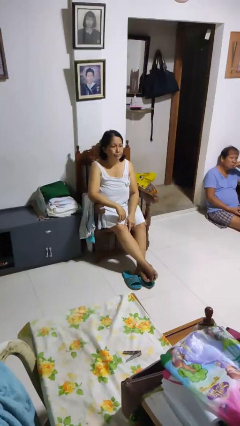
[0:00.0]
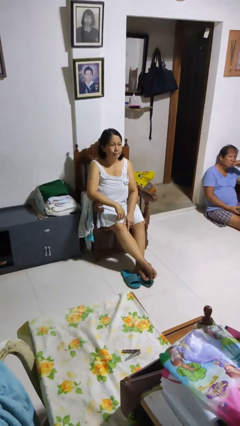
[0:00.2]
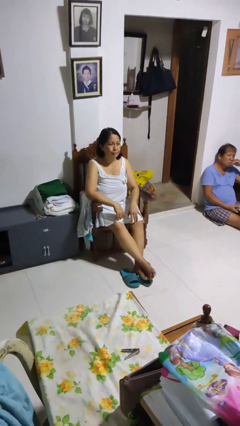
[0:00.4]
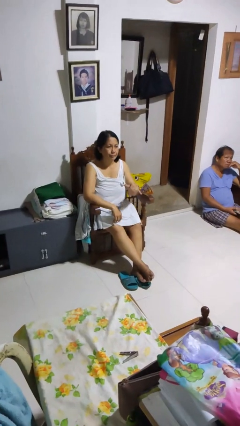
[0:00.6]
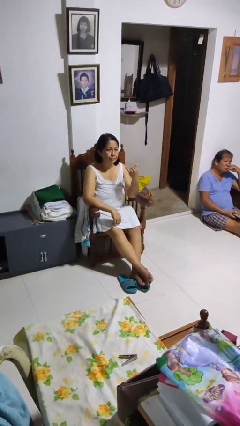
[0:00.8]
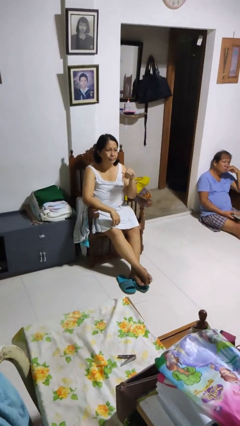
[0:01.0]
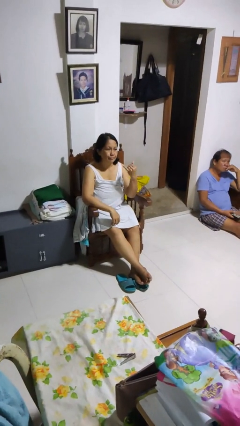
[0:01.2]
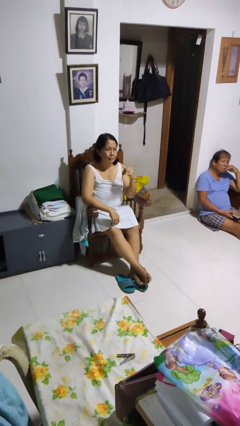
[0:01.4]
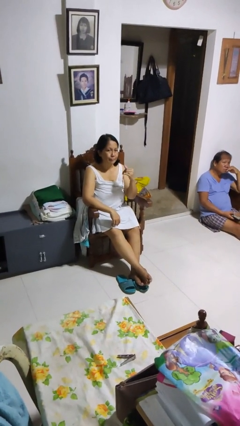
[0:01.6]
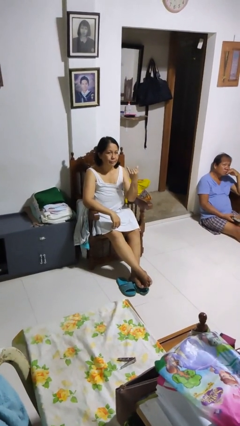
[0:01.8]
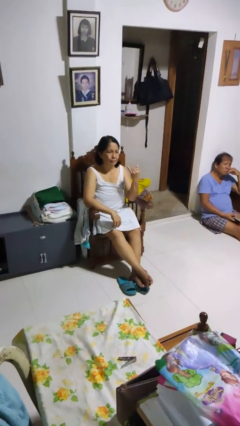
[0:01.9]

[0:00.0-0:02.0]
person gestures hang loose

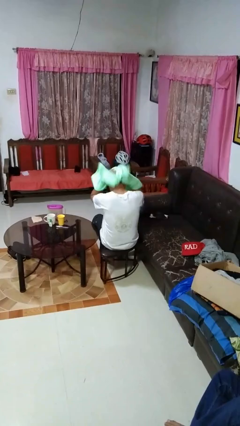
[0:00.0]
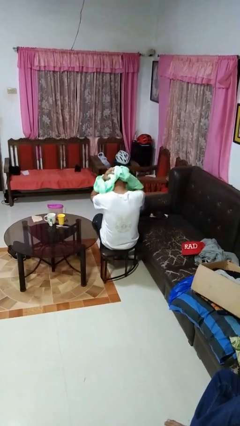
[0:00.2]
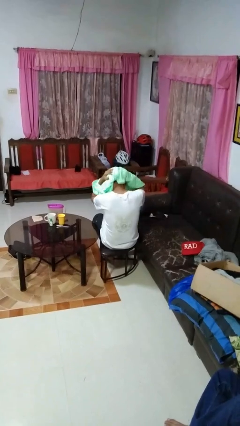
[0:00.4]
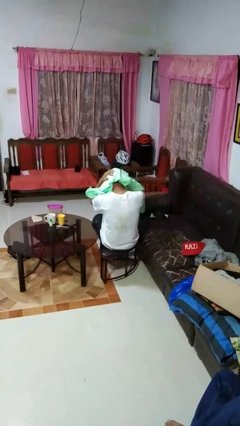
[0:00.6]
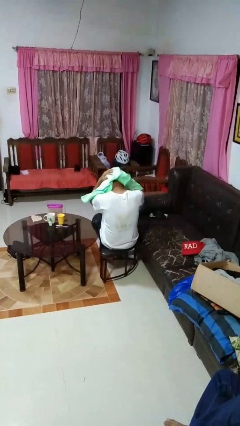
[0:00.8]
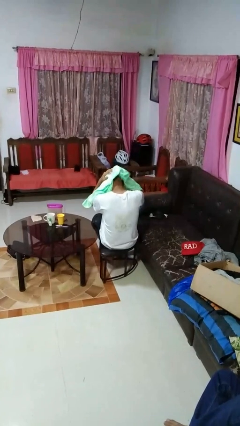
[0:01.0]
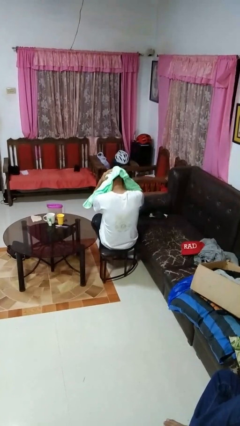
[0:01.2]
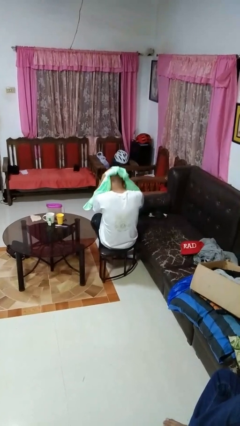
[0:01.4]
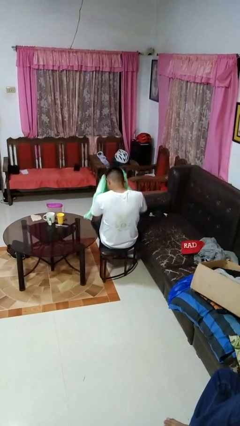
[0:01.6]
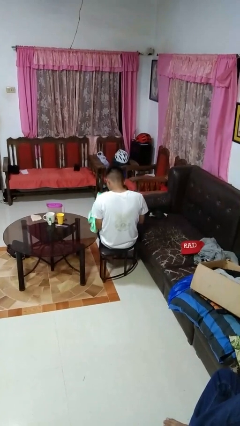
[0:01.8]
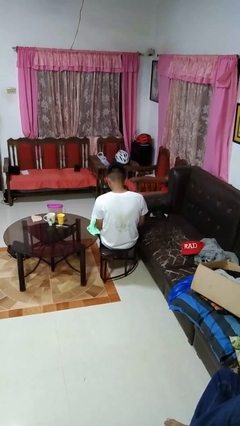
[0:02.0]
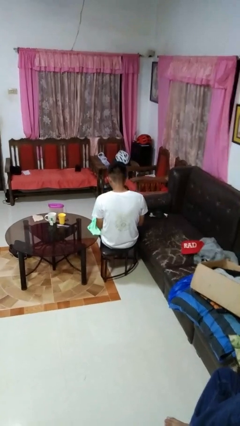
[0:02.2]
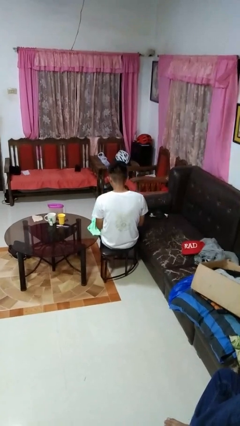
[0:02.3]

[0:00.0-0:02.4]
person dries hair with towel

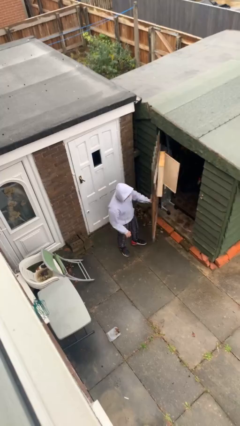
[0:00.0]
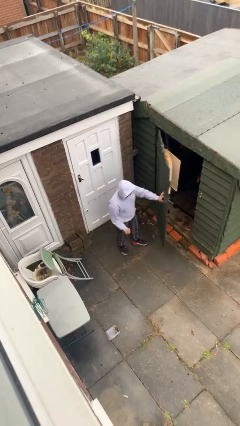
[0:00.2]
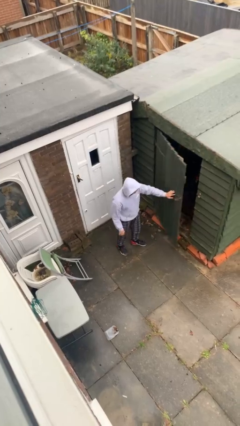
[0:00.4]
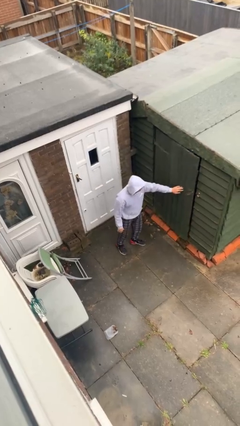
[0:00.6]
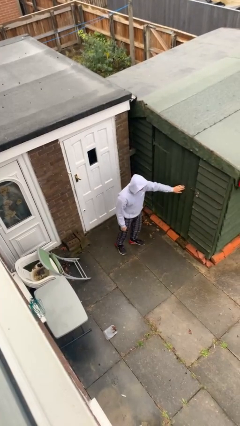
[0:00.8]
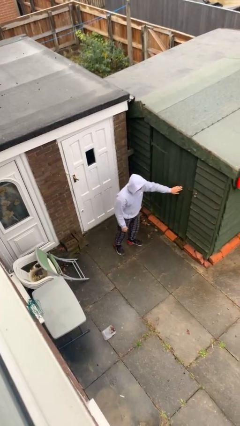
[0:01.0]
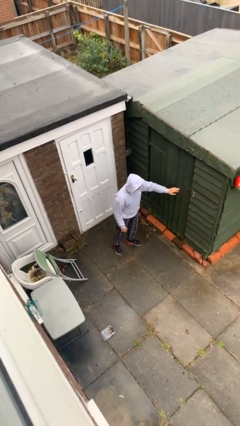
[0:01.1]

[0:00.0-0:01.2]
person closes facility door

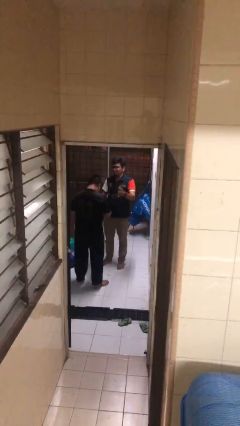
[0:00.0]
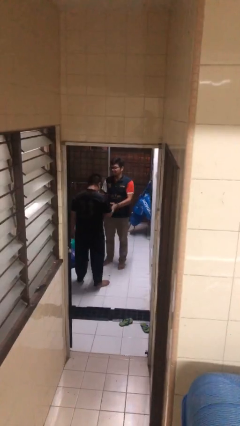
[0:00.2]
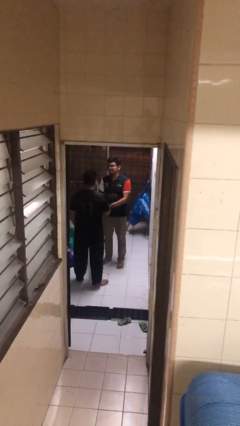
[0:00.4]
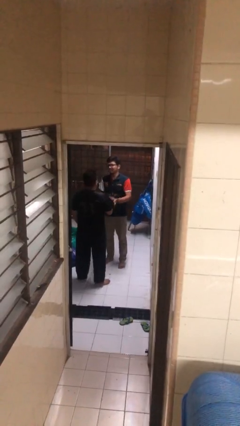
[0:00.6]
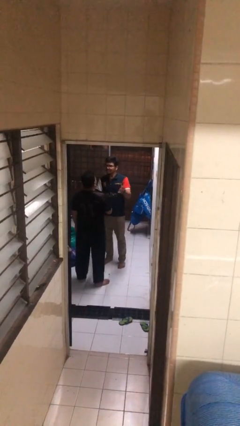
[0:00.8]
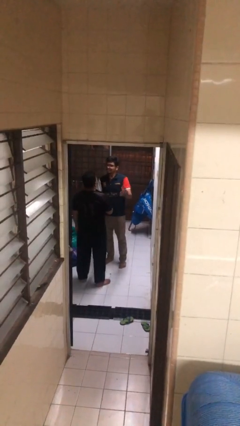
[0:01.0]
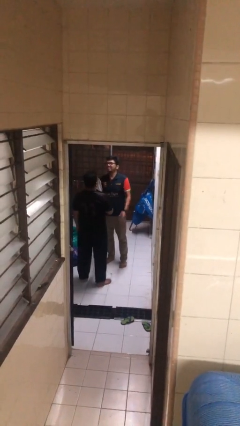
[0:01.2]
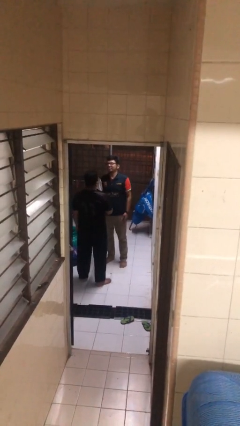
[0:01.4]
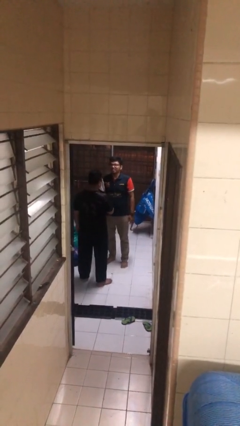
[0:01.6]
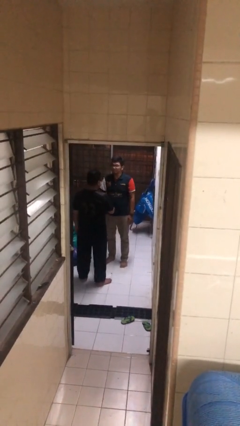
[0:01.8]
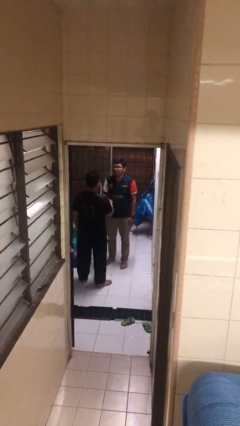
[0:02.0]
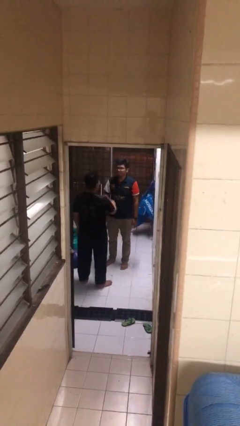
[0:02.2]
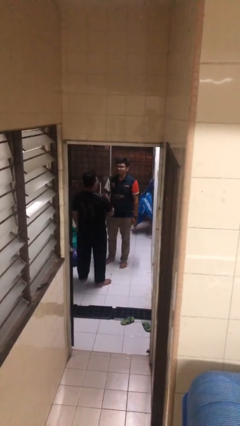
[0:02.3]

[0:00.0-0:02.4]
person talks to person

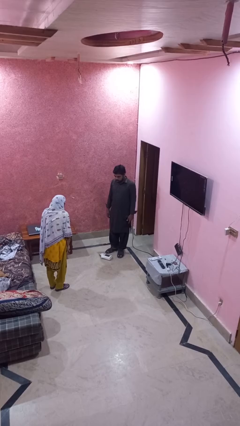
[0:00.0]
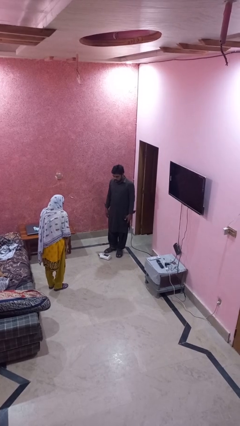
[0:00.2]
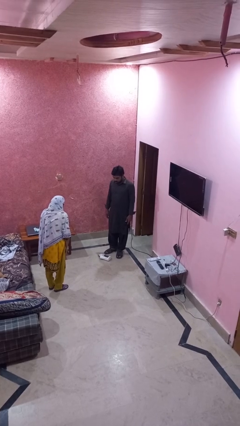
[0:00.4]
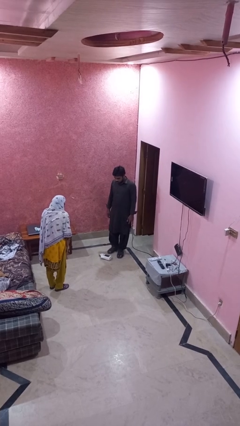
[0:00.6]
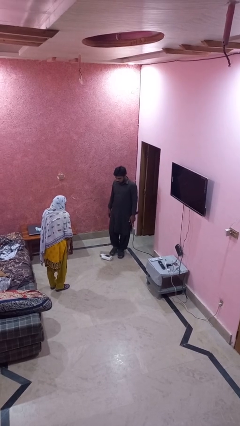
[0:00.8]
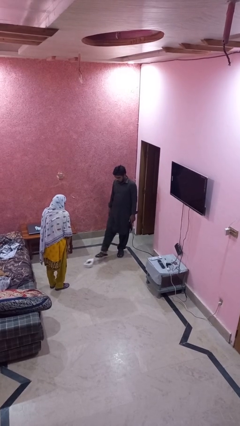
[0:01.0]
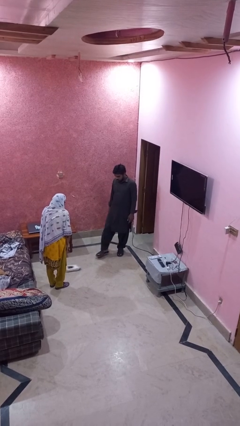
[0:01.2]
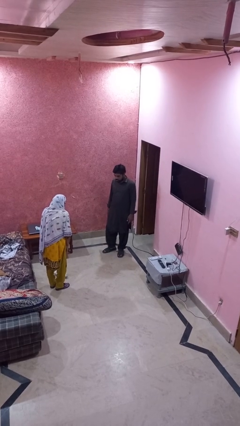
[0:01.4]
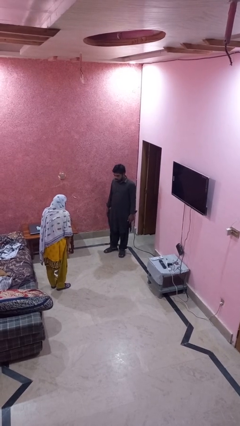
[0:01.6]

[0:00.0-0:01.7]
person kicks object to person

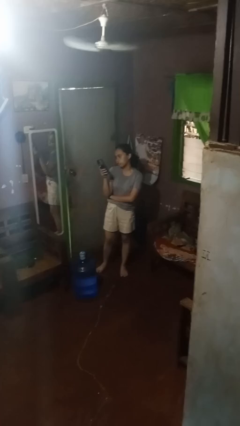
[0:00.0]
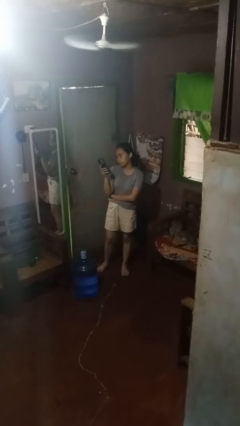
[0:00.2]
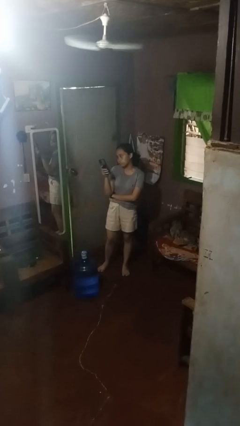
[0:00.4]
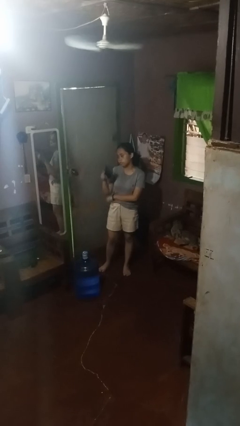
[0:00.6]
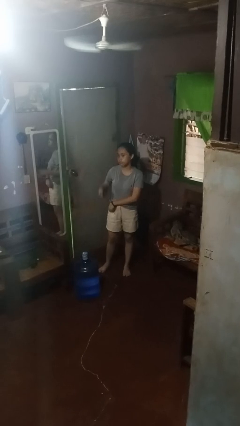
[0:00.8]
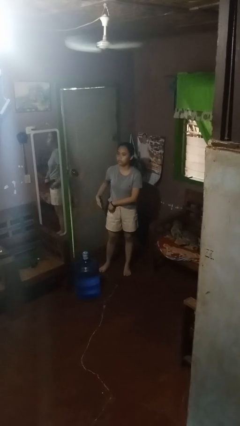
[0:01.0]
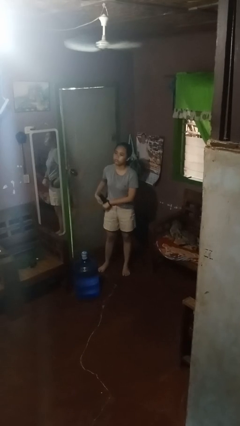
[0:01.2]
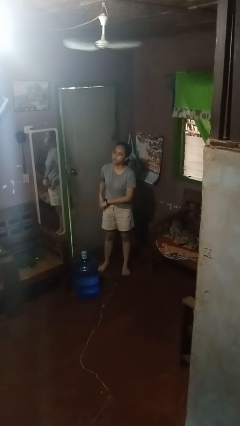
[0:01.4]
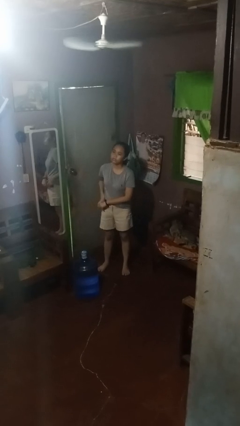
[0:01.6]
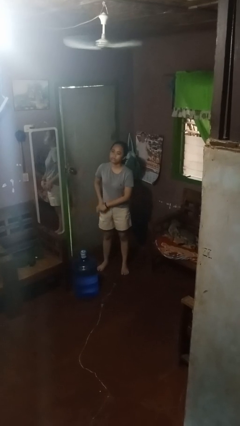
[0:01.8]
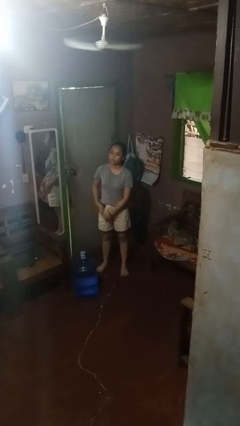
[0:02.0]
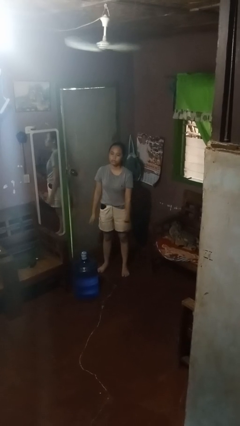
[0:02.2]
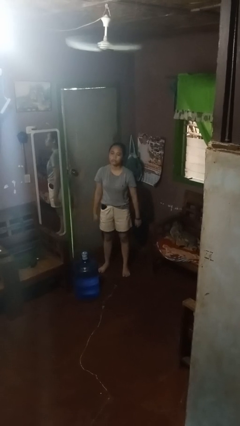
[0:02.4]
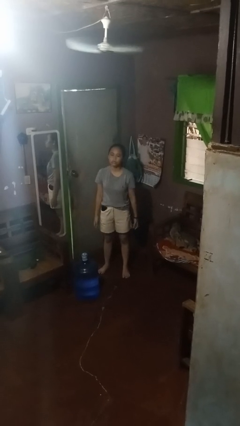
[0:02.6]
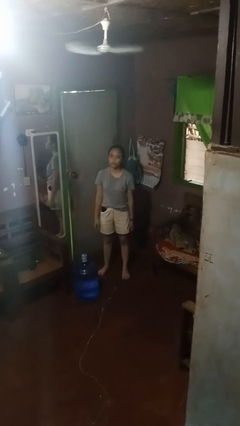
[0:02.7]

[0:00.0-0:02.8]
person puts phone into pocket

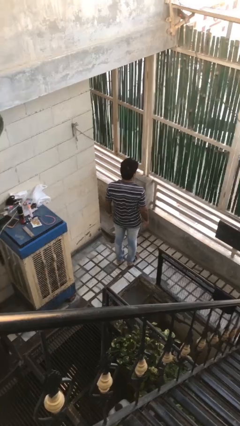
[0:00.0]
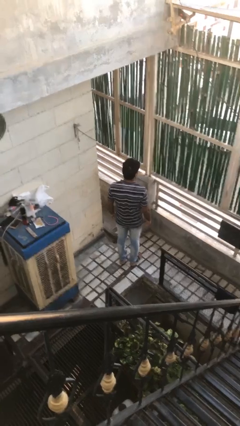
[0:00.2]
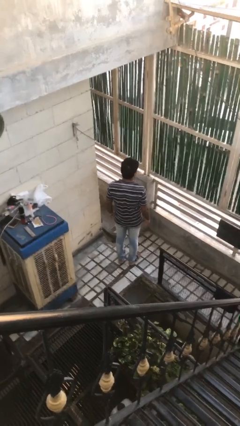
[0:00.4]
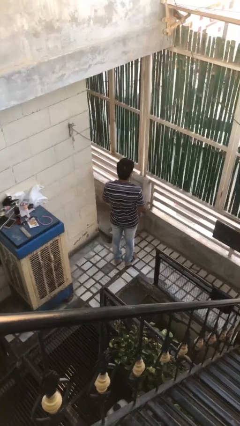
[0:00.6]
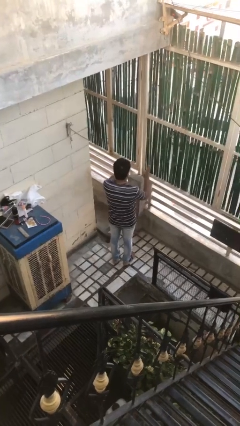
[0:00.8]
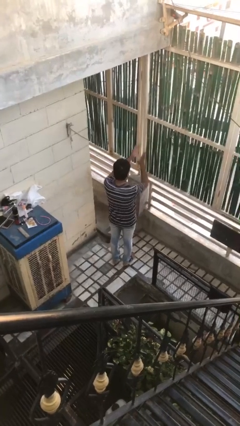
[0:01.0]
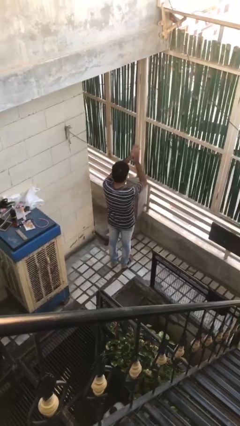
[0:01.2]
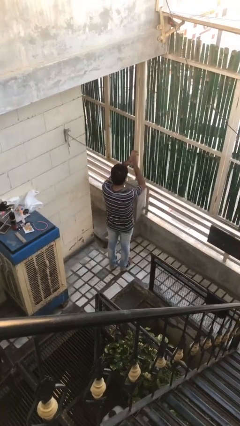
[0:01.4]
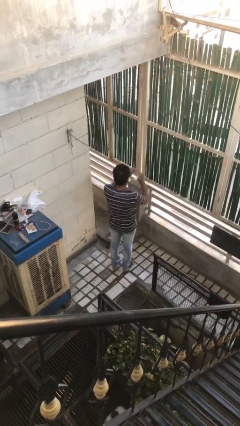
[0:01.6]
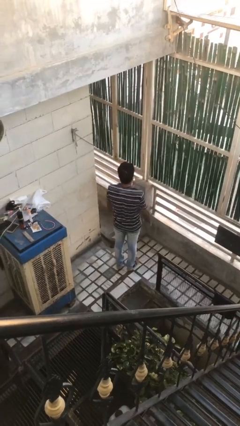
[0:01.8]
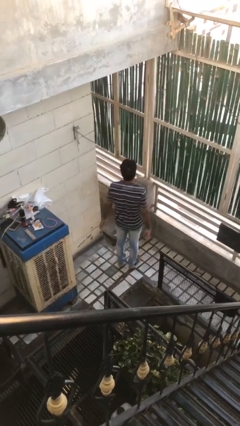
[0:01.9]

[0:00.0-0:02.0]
person claps hands

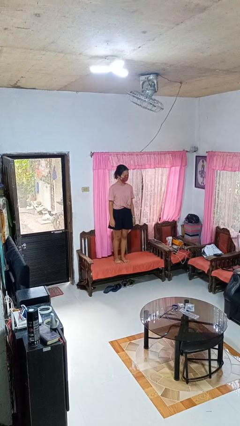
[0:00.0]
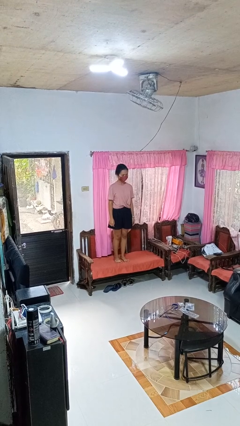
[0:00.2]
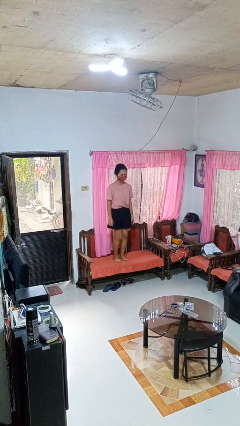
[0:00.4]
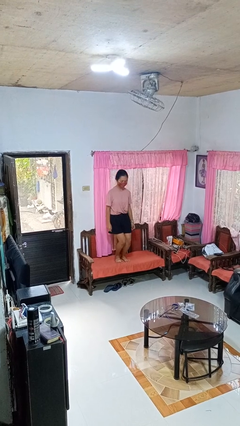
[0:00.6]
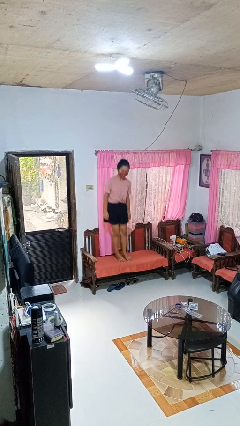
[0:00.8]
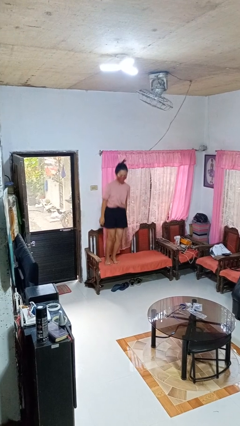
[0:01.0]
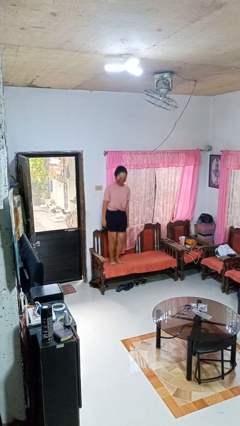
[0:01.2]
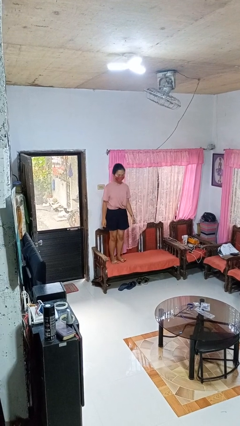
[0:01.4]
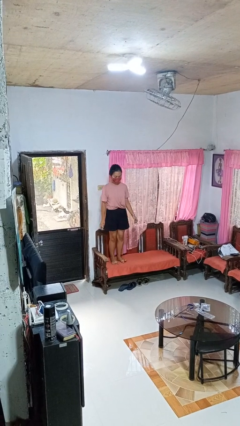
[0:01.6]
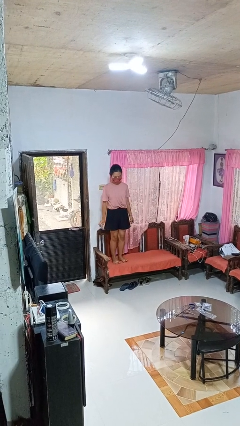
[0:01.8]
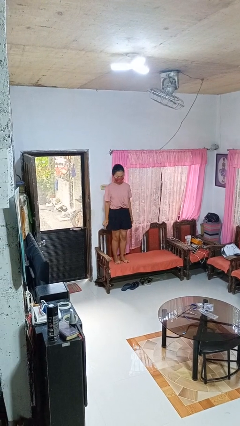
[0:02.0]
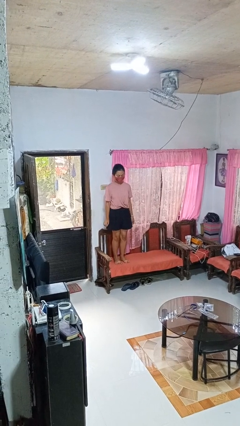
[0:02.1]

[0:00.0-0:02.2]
person jumps on couch

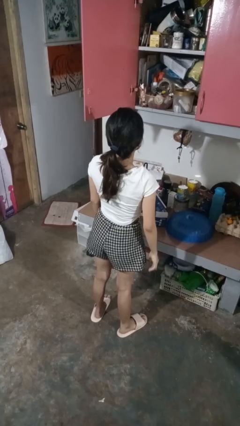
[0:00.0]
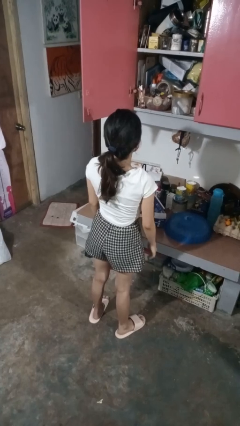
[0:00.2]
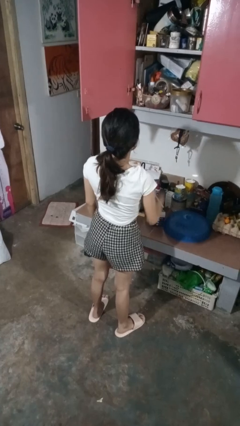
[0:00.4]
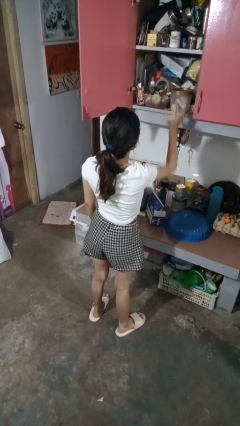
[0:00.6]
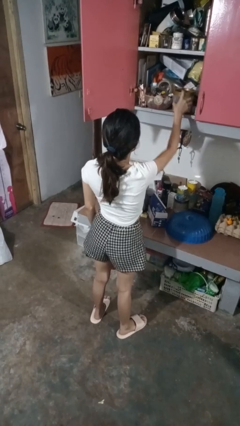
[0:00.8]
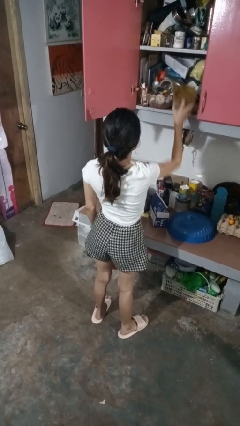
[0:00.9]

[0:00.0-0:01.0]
person picks up object from cabinet
